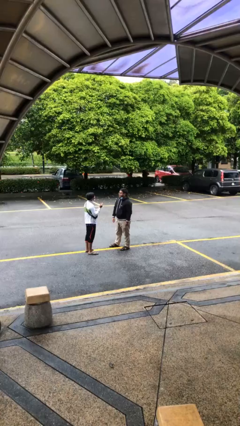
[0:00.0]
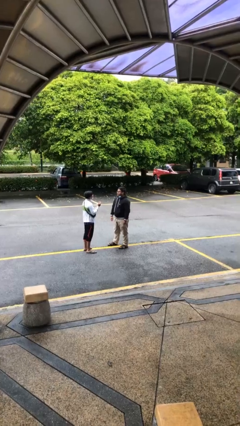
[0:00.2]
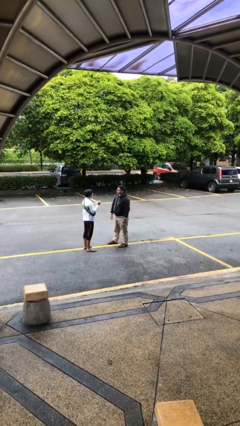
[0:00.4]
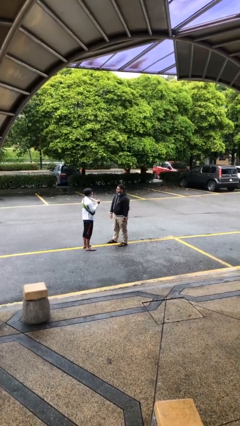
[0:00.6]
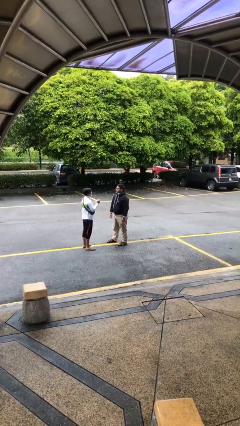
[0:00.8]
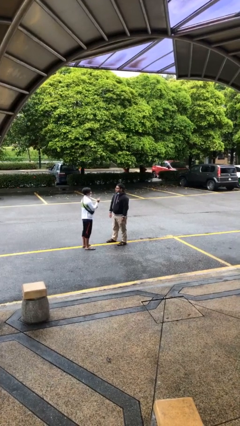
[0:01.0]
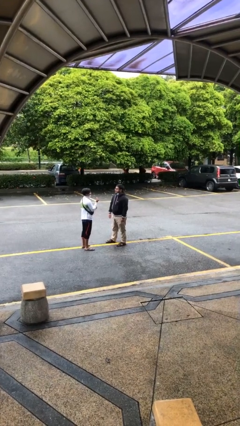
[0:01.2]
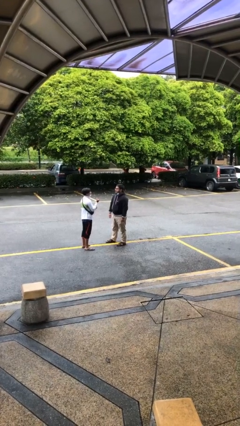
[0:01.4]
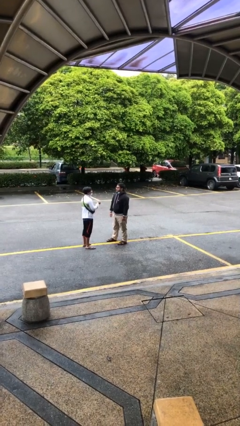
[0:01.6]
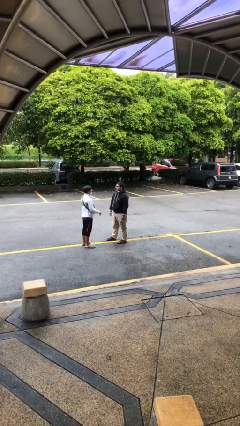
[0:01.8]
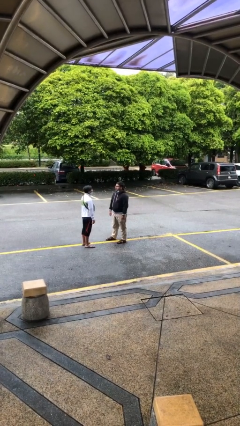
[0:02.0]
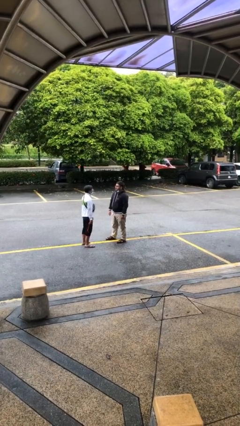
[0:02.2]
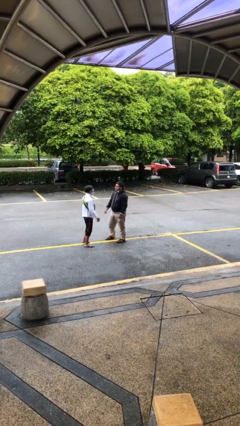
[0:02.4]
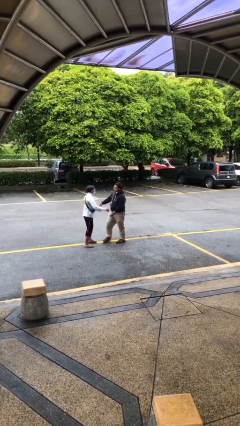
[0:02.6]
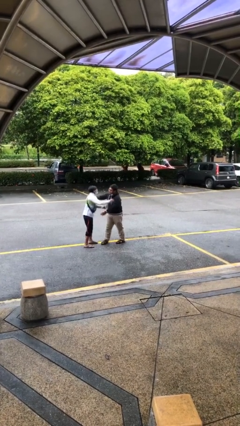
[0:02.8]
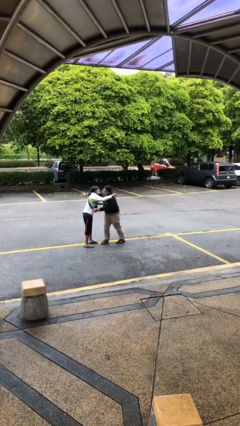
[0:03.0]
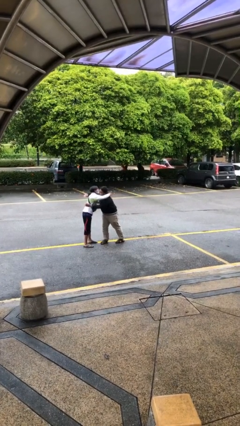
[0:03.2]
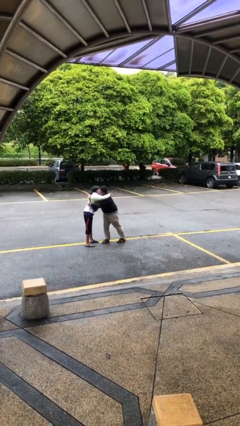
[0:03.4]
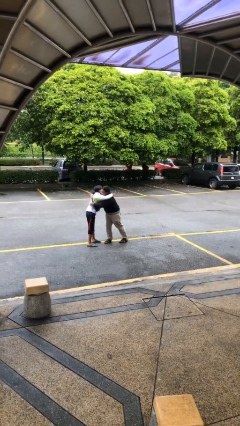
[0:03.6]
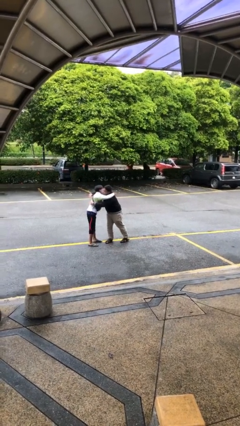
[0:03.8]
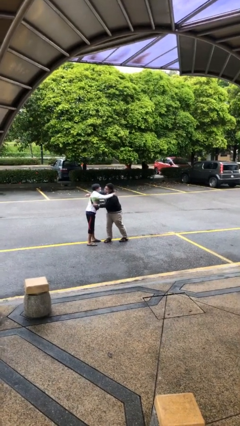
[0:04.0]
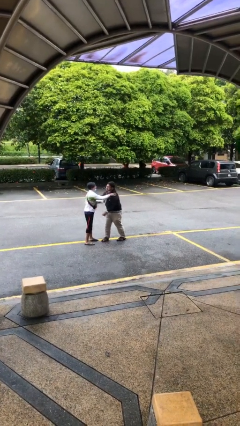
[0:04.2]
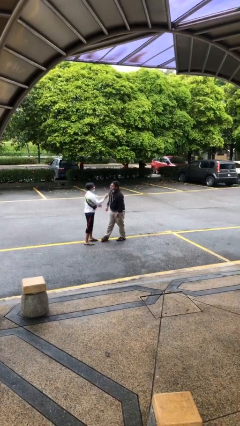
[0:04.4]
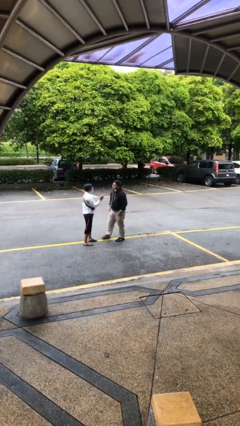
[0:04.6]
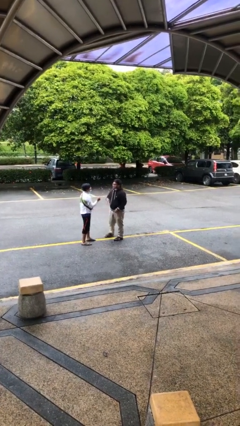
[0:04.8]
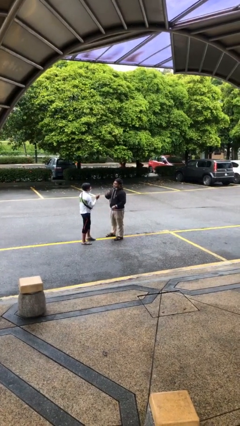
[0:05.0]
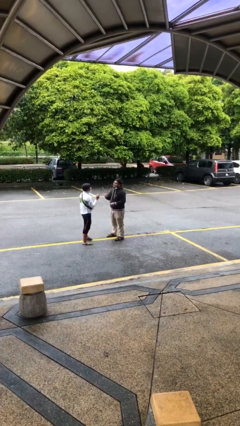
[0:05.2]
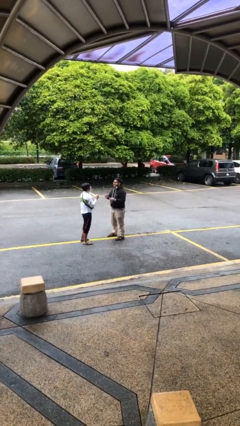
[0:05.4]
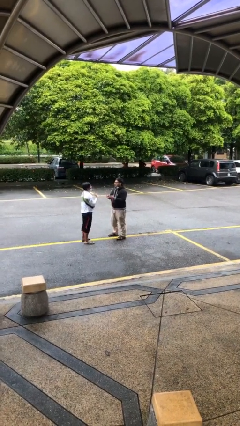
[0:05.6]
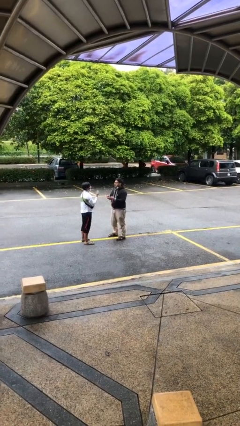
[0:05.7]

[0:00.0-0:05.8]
person embraces person

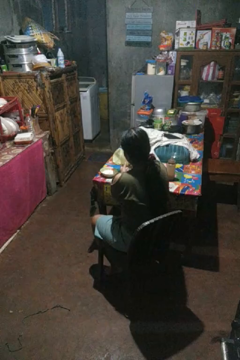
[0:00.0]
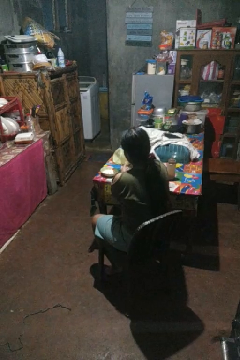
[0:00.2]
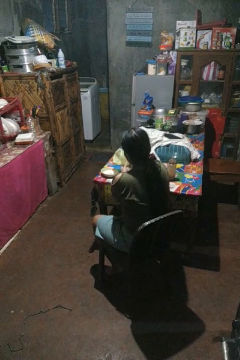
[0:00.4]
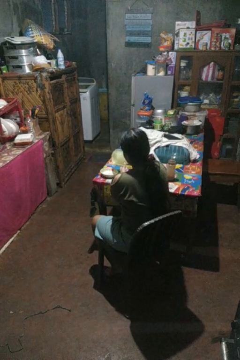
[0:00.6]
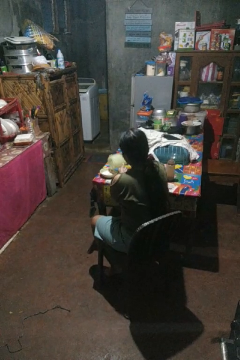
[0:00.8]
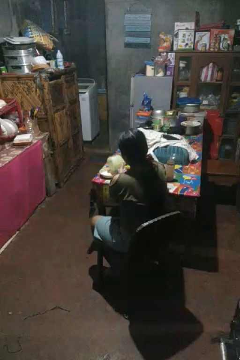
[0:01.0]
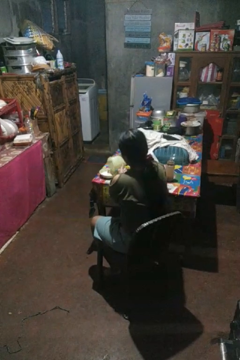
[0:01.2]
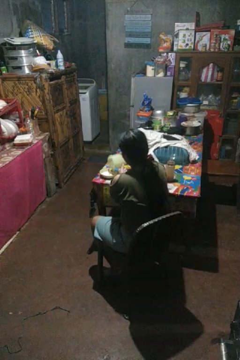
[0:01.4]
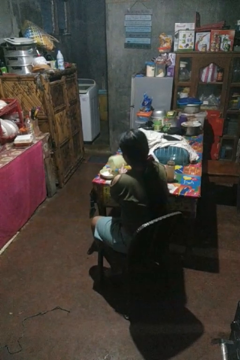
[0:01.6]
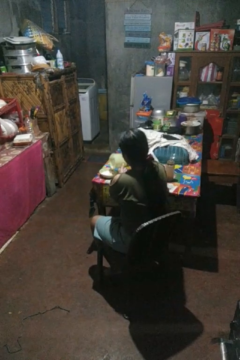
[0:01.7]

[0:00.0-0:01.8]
person pours into bowl

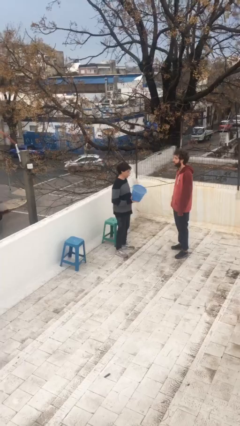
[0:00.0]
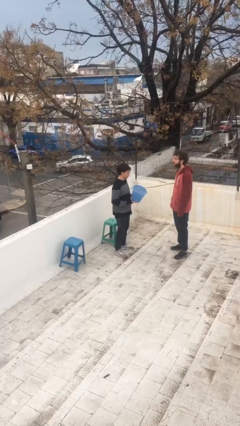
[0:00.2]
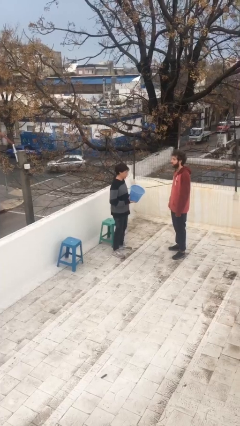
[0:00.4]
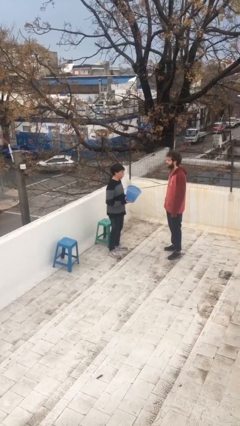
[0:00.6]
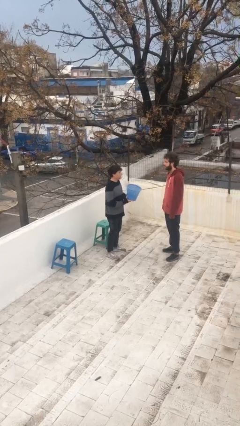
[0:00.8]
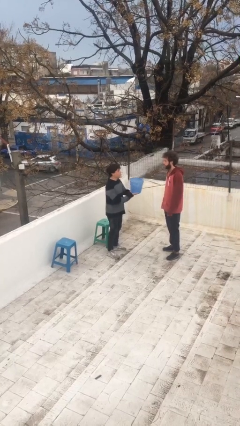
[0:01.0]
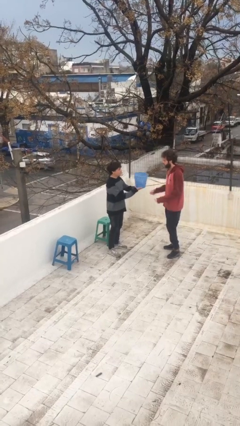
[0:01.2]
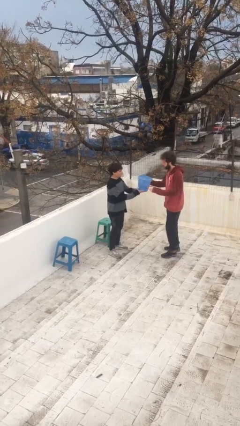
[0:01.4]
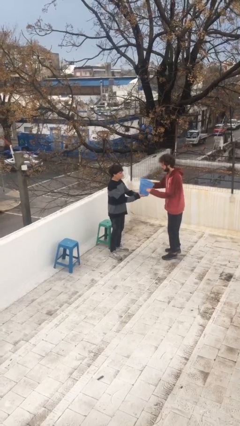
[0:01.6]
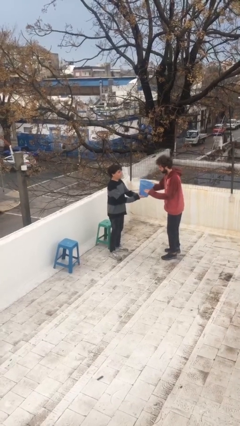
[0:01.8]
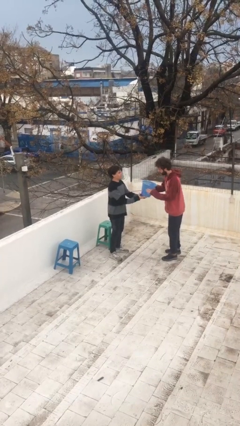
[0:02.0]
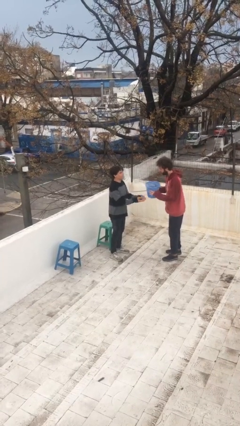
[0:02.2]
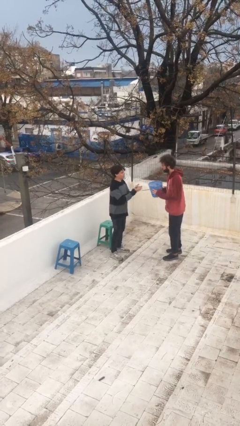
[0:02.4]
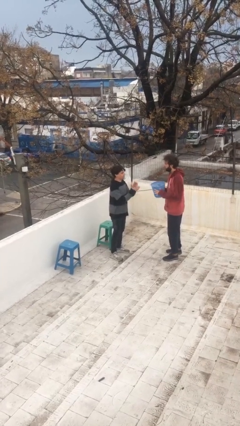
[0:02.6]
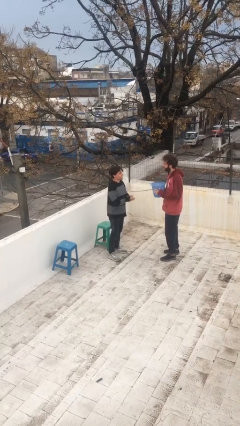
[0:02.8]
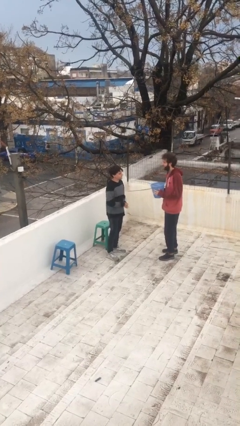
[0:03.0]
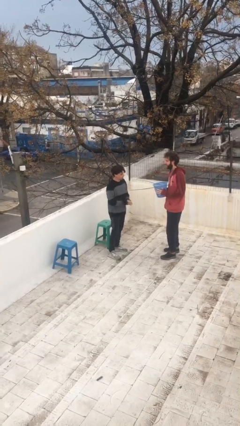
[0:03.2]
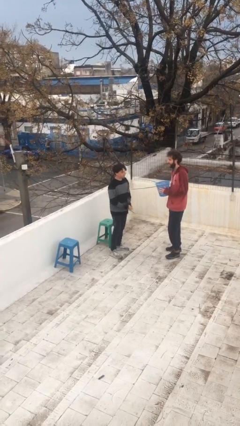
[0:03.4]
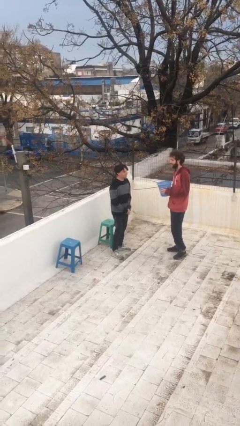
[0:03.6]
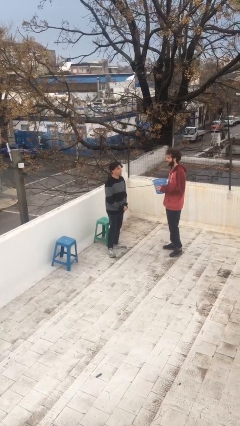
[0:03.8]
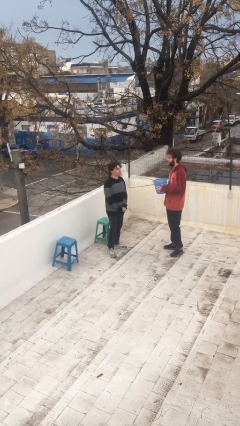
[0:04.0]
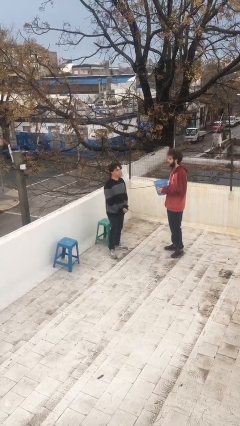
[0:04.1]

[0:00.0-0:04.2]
person transfers object to person

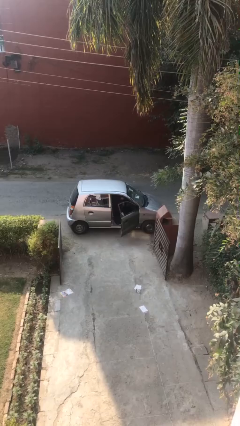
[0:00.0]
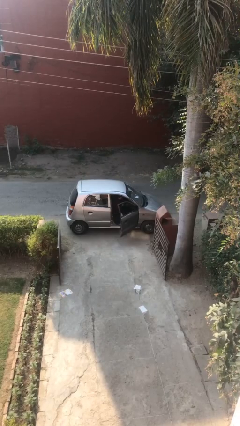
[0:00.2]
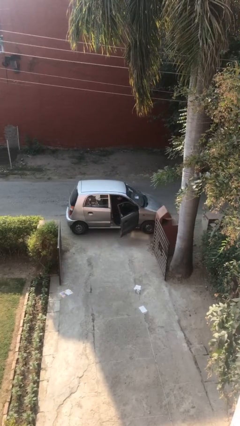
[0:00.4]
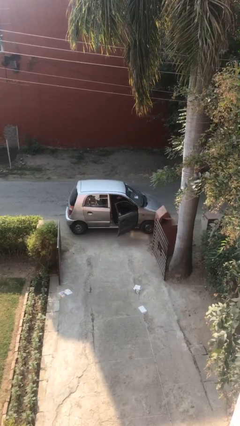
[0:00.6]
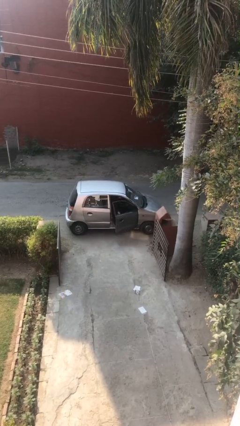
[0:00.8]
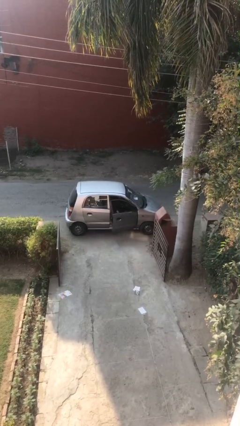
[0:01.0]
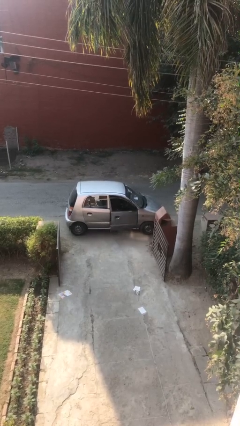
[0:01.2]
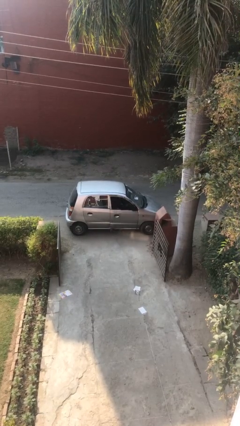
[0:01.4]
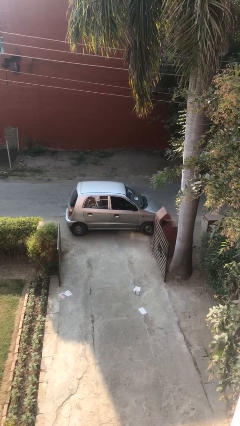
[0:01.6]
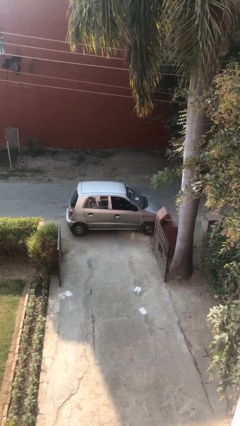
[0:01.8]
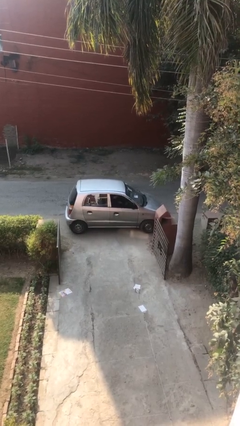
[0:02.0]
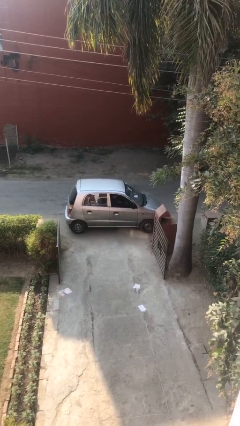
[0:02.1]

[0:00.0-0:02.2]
person closes car door

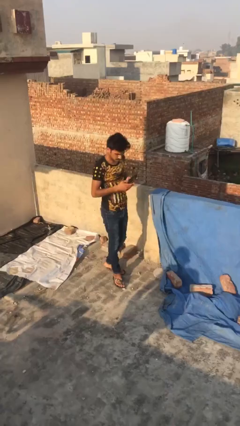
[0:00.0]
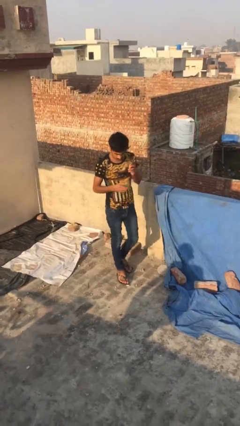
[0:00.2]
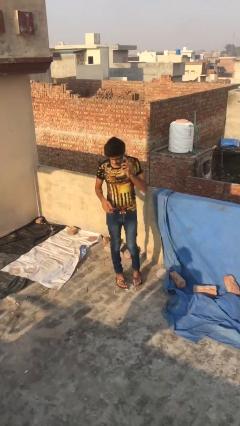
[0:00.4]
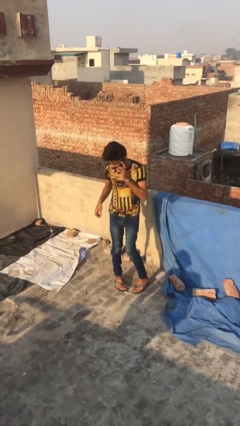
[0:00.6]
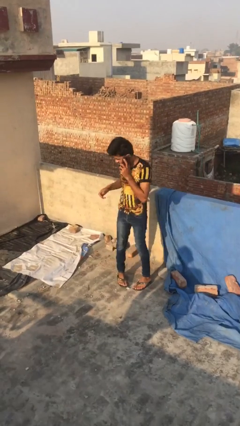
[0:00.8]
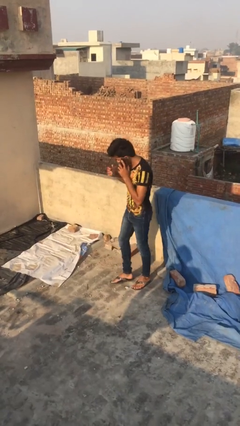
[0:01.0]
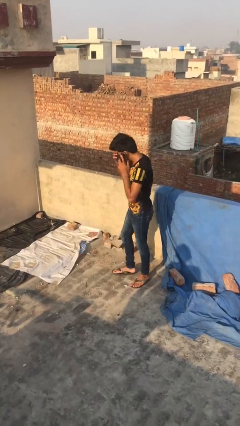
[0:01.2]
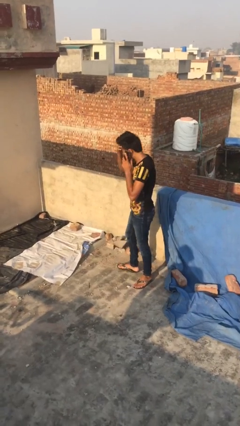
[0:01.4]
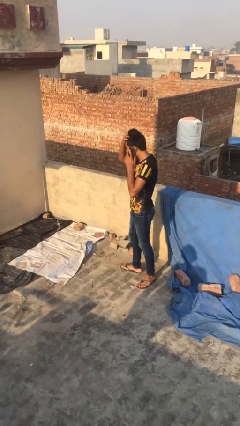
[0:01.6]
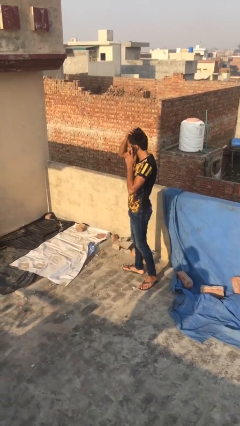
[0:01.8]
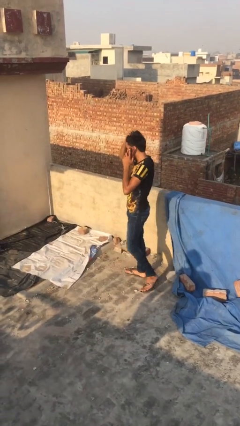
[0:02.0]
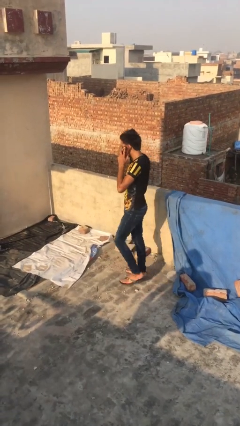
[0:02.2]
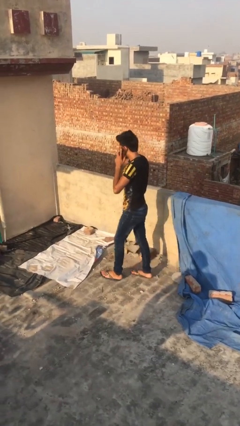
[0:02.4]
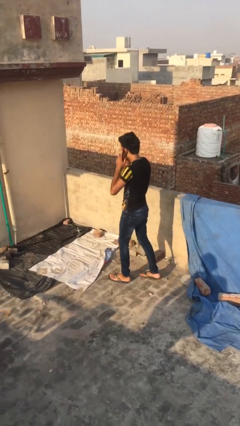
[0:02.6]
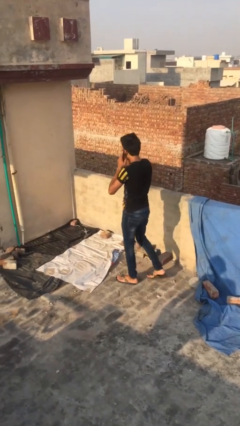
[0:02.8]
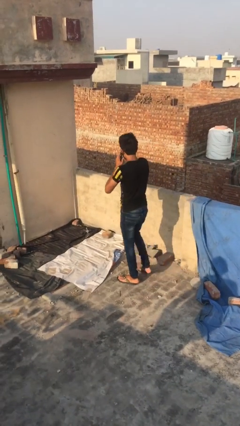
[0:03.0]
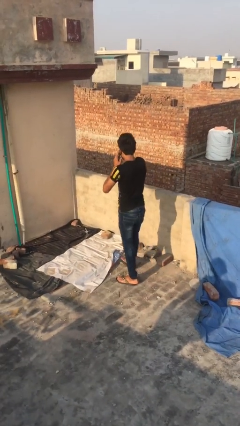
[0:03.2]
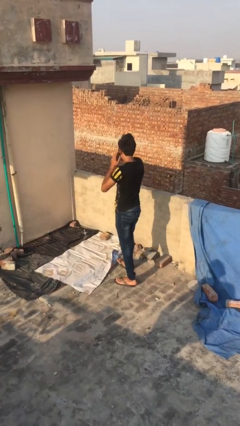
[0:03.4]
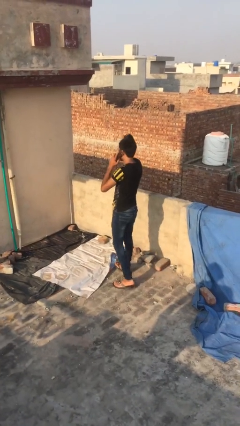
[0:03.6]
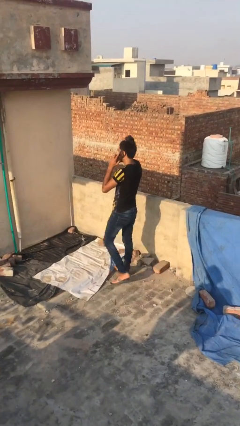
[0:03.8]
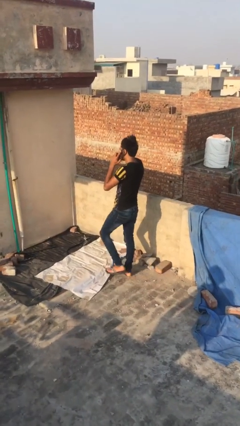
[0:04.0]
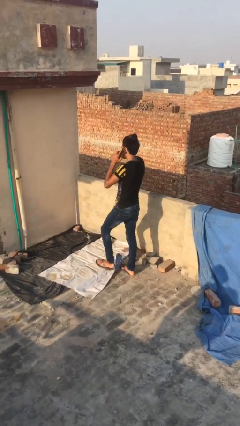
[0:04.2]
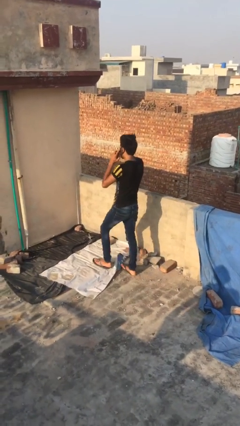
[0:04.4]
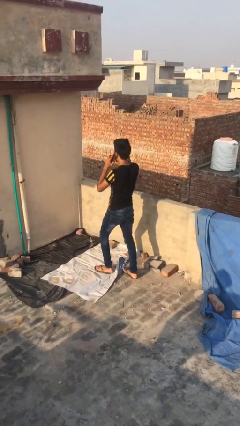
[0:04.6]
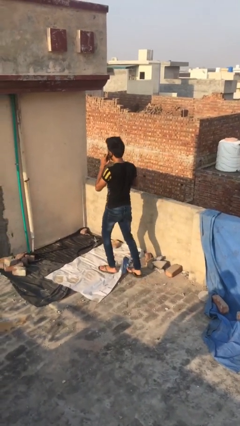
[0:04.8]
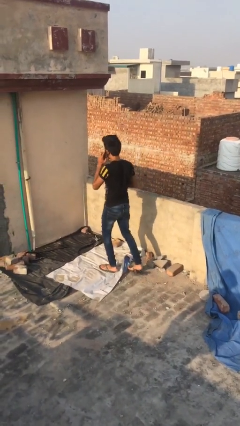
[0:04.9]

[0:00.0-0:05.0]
person talks on phone
